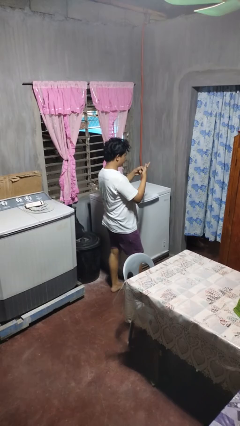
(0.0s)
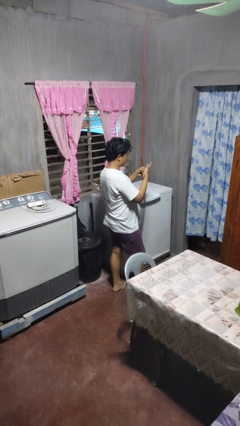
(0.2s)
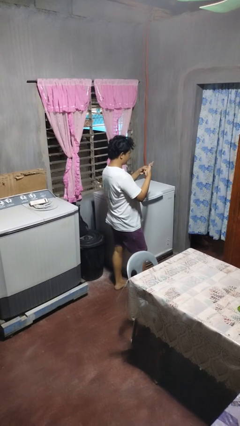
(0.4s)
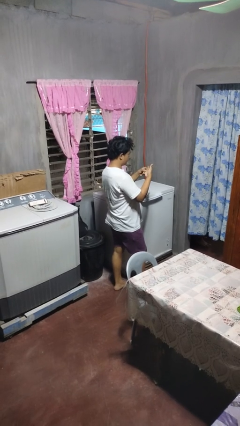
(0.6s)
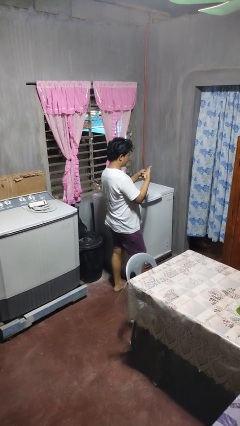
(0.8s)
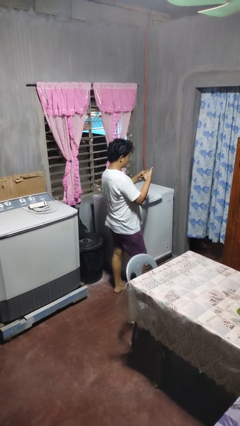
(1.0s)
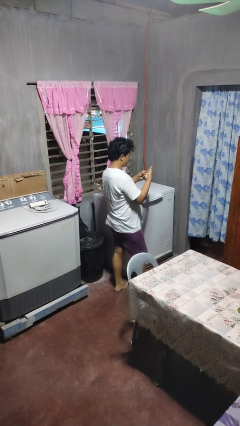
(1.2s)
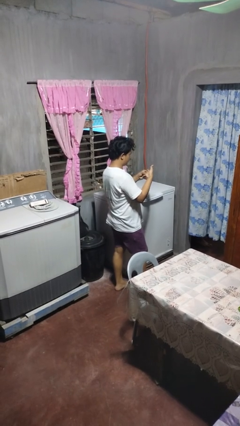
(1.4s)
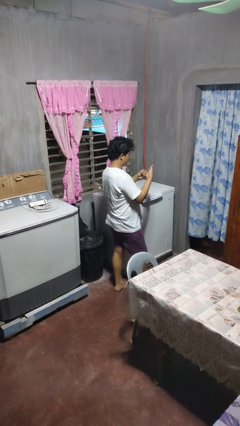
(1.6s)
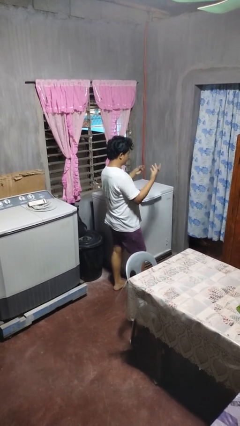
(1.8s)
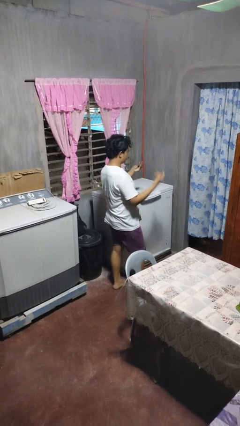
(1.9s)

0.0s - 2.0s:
person takes off ring

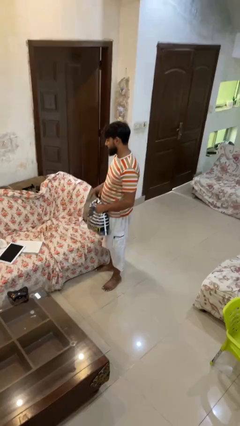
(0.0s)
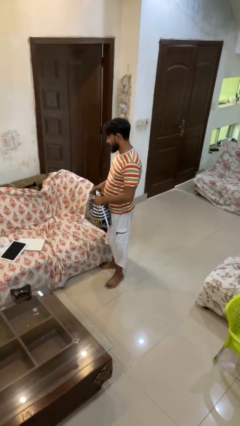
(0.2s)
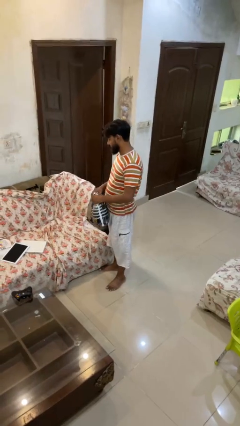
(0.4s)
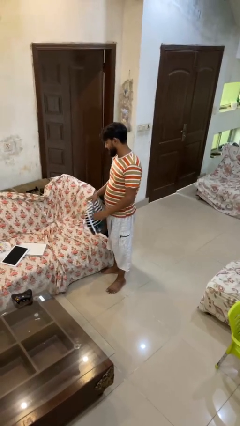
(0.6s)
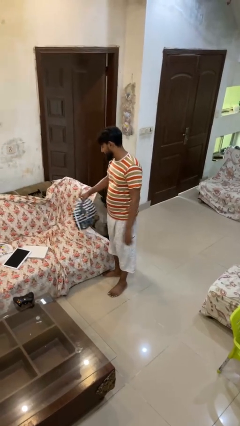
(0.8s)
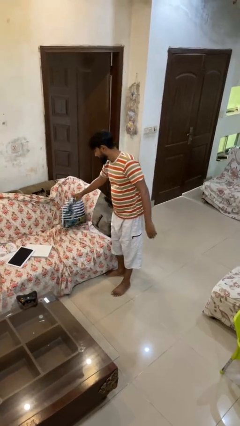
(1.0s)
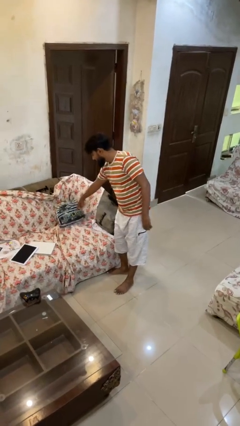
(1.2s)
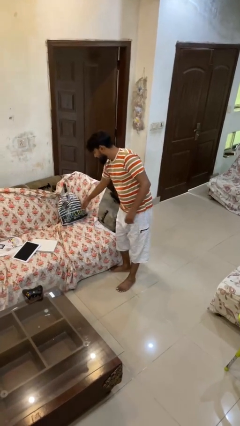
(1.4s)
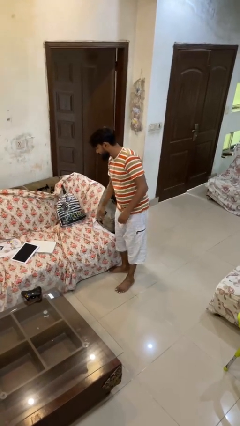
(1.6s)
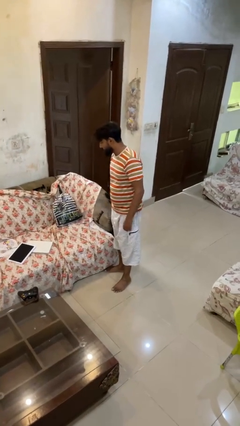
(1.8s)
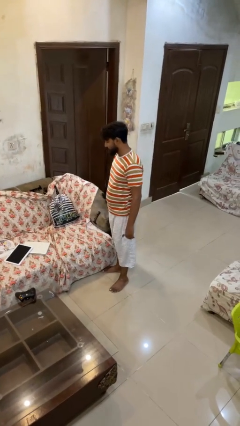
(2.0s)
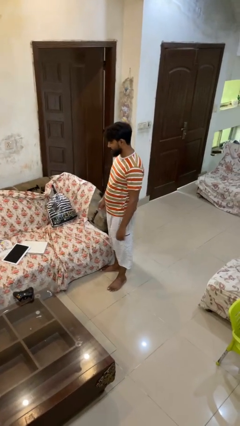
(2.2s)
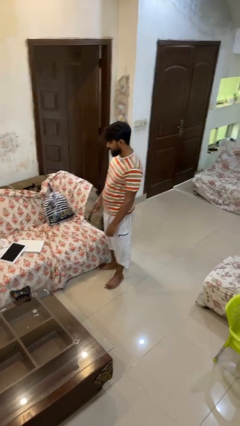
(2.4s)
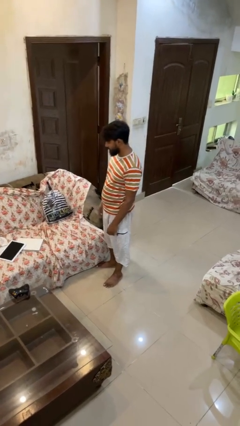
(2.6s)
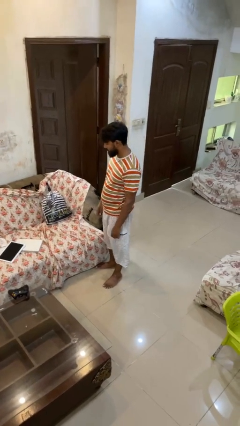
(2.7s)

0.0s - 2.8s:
person puts down object on couch

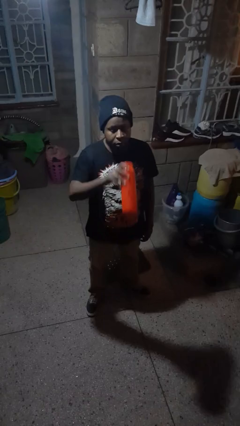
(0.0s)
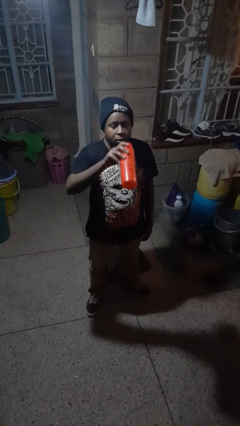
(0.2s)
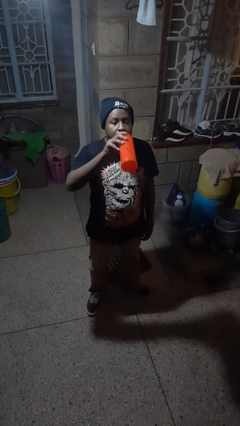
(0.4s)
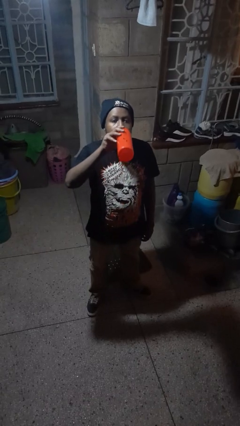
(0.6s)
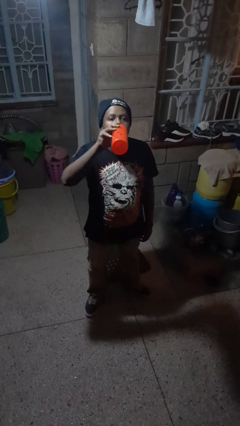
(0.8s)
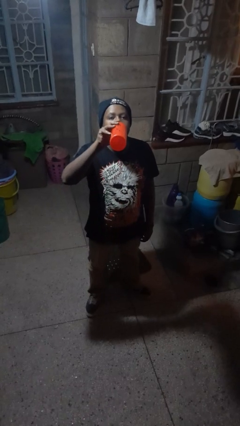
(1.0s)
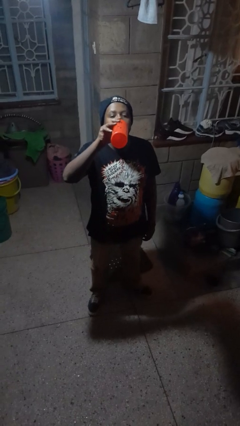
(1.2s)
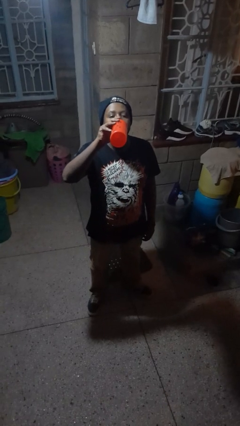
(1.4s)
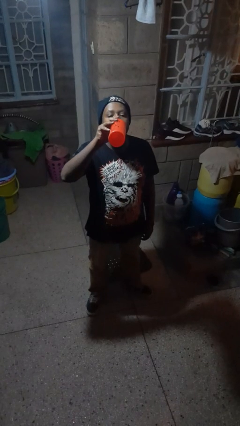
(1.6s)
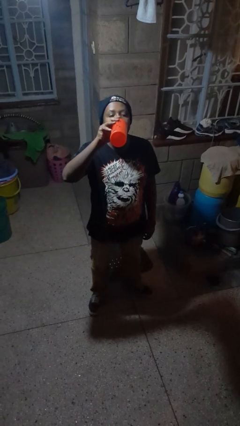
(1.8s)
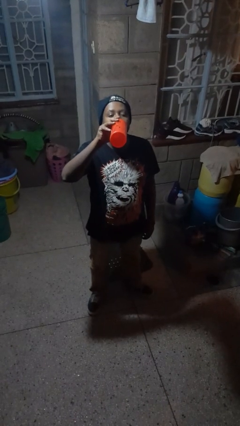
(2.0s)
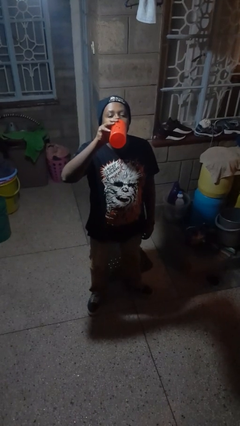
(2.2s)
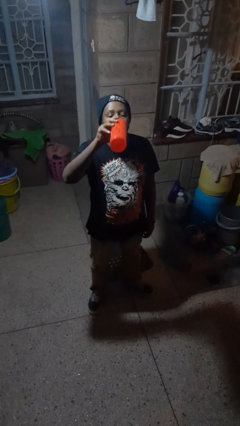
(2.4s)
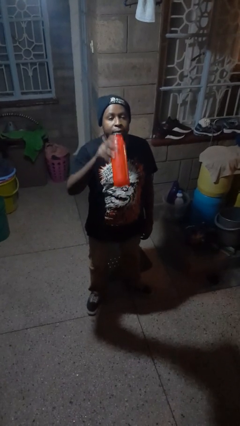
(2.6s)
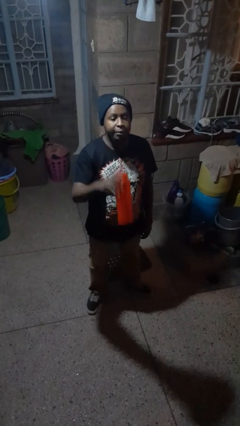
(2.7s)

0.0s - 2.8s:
person drinks from bottle

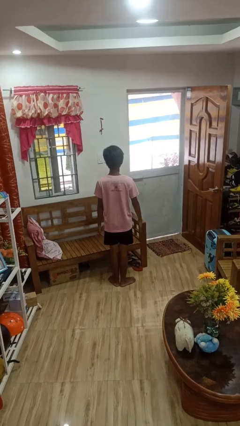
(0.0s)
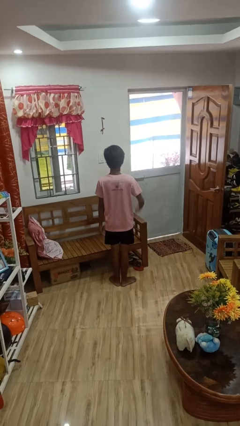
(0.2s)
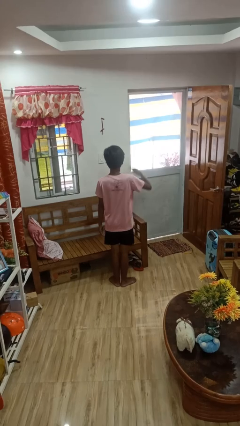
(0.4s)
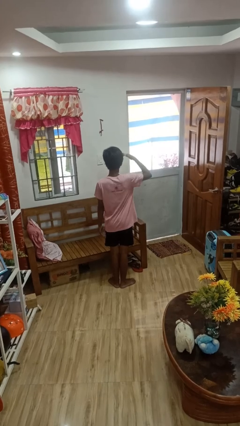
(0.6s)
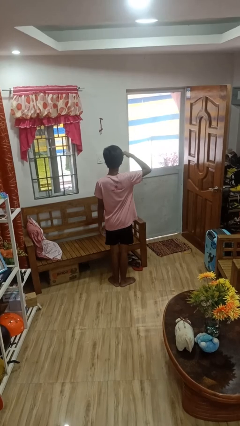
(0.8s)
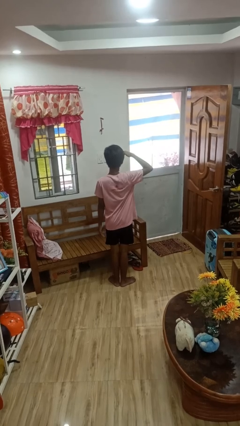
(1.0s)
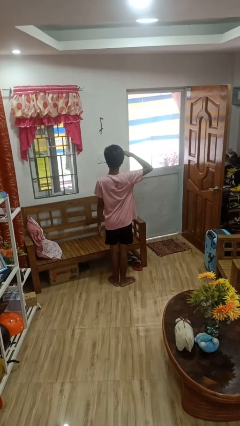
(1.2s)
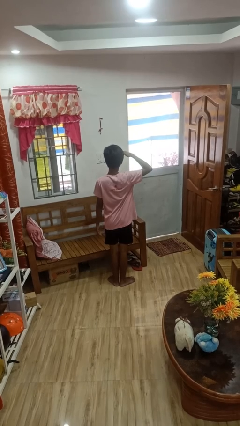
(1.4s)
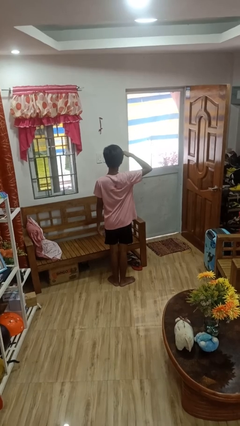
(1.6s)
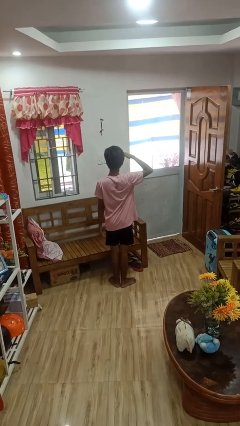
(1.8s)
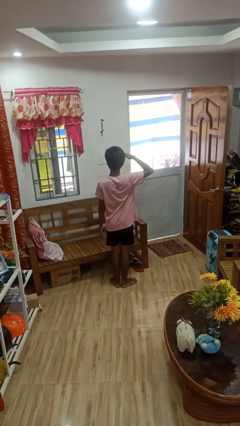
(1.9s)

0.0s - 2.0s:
person salutes

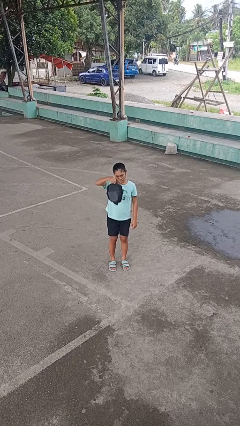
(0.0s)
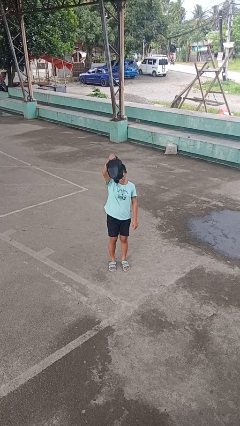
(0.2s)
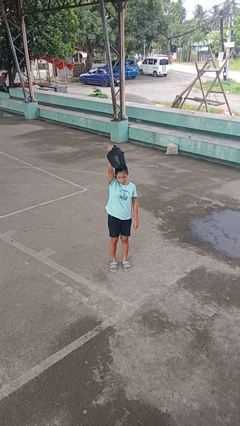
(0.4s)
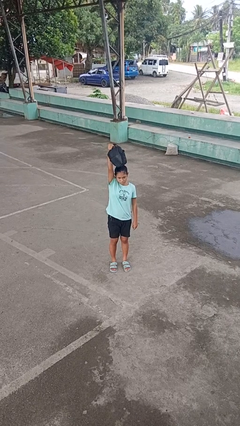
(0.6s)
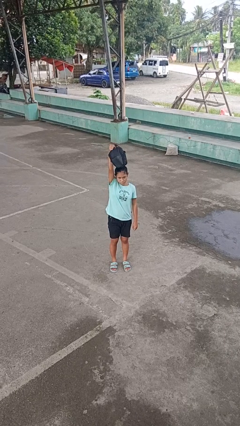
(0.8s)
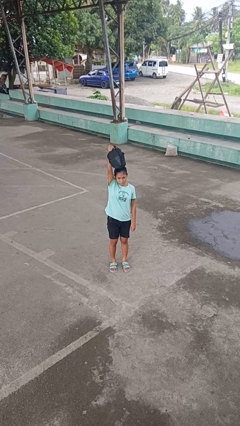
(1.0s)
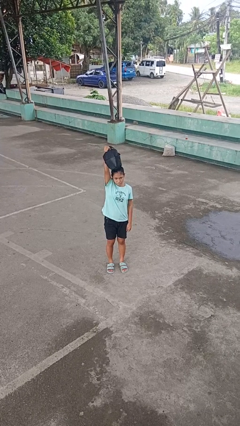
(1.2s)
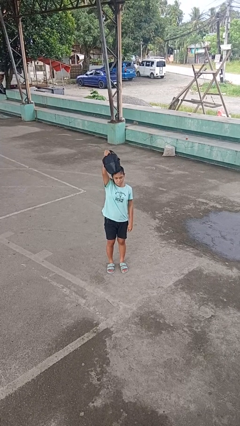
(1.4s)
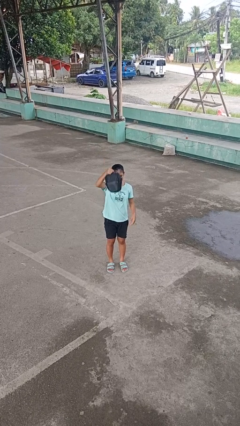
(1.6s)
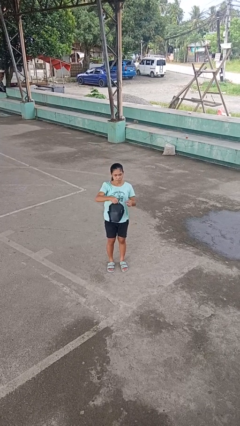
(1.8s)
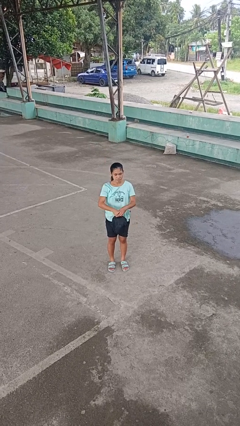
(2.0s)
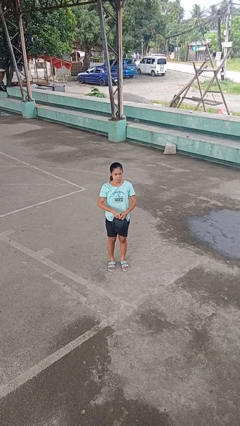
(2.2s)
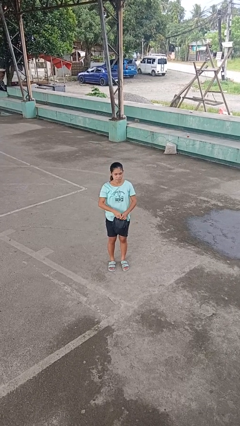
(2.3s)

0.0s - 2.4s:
person holds object above head

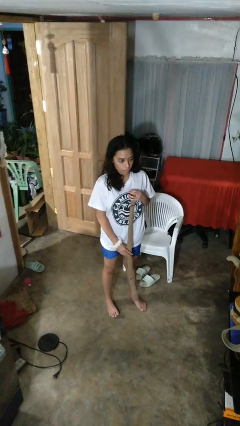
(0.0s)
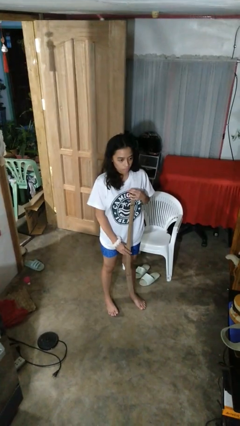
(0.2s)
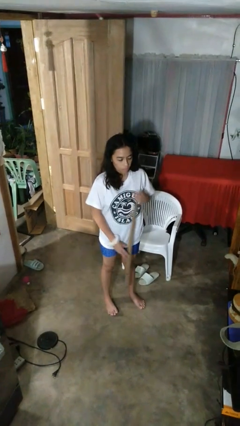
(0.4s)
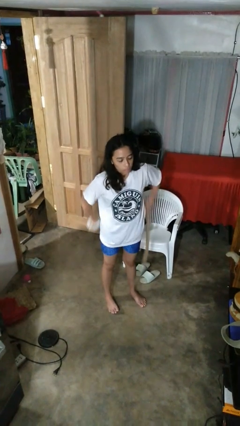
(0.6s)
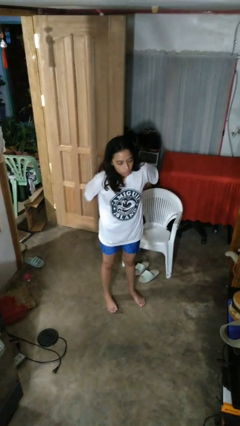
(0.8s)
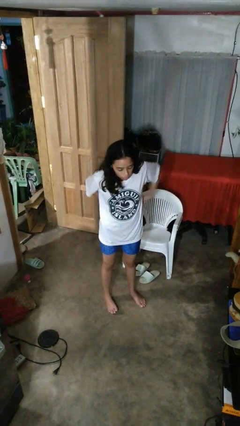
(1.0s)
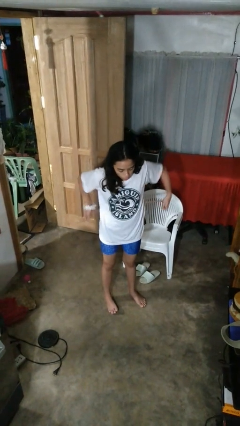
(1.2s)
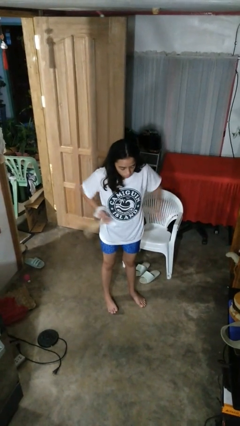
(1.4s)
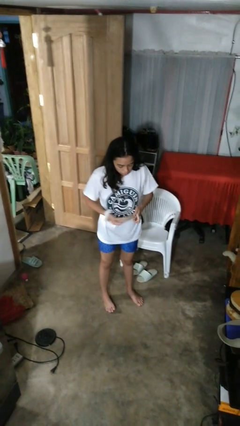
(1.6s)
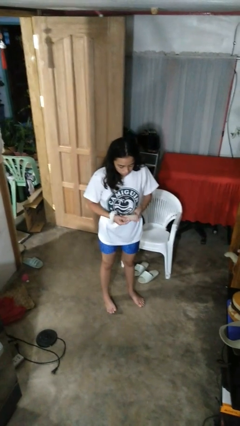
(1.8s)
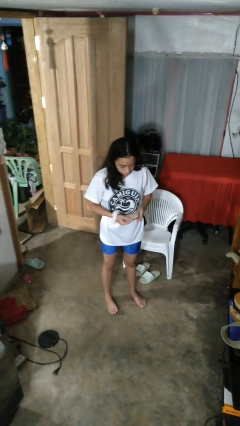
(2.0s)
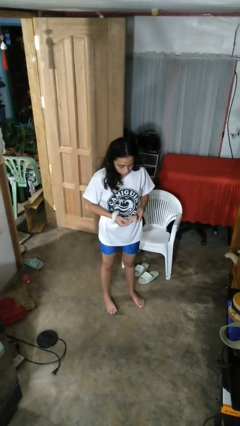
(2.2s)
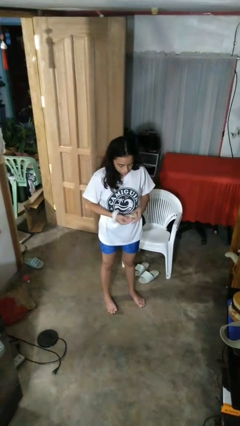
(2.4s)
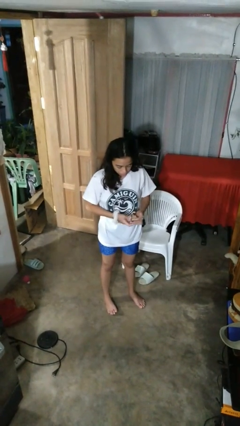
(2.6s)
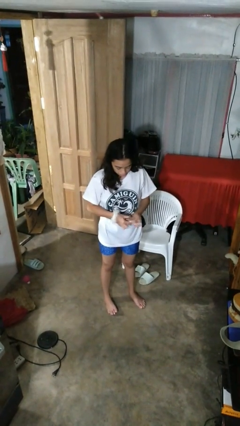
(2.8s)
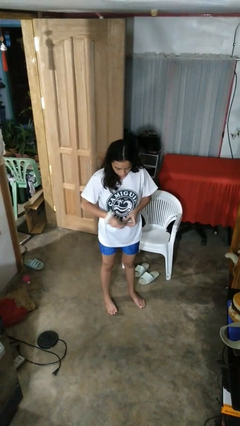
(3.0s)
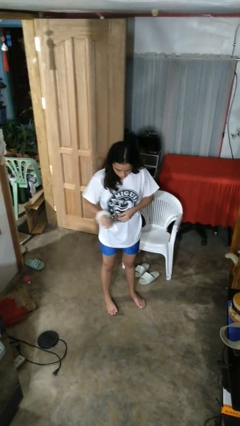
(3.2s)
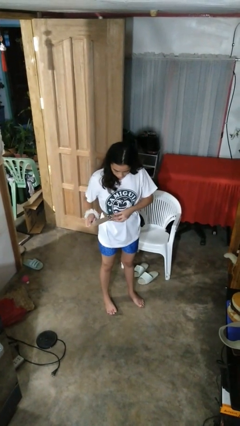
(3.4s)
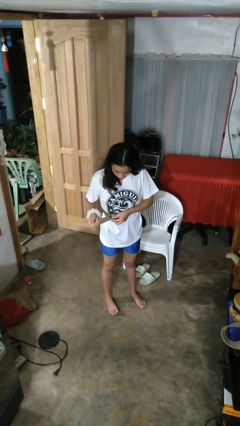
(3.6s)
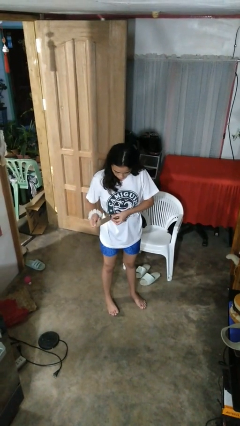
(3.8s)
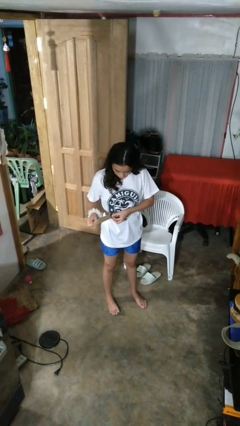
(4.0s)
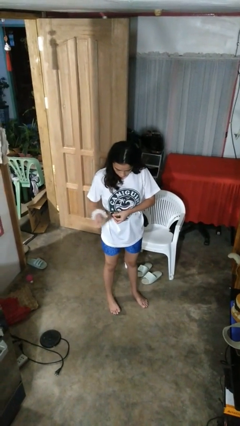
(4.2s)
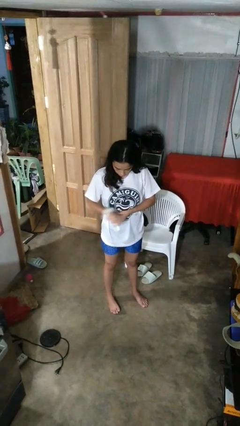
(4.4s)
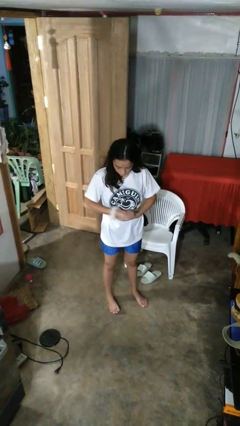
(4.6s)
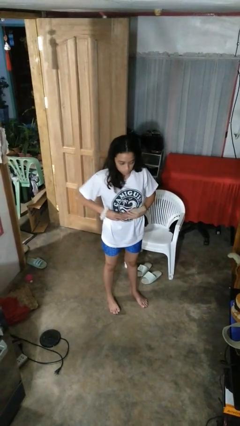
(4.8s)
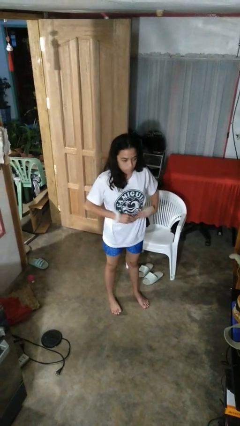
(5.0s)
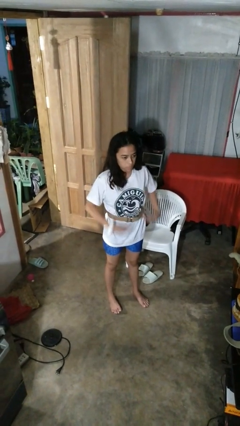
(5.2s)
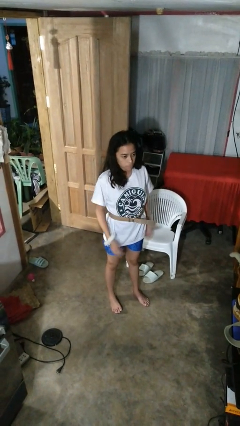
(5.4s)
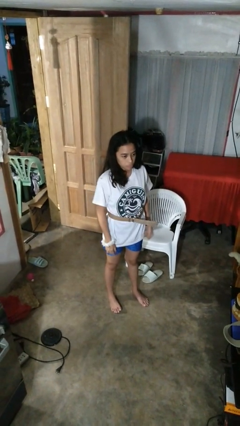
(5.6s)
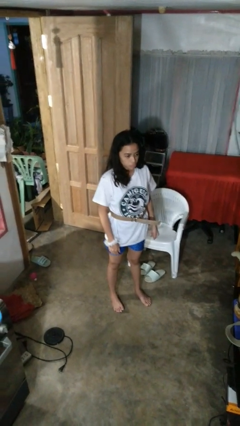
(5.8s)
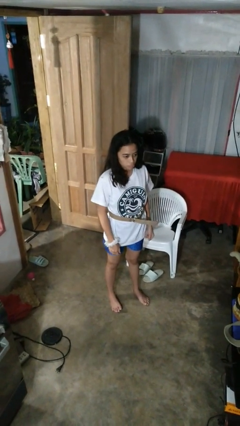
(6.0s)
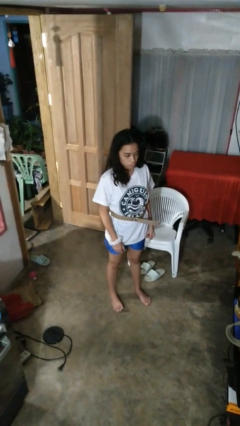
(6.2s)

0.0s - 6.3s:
person puts on belt
